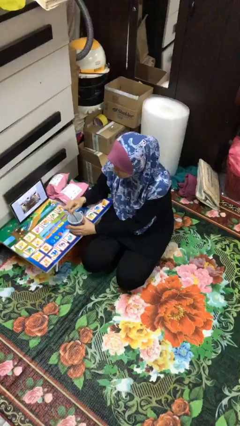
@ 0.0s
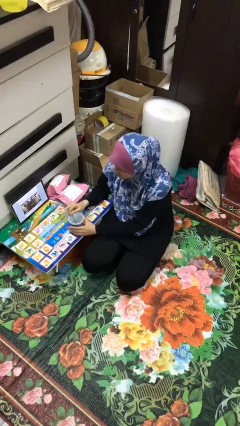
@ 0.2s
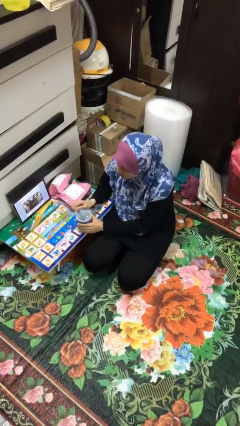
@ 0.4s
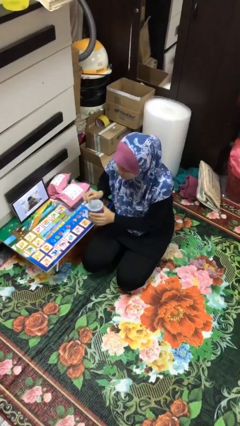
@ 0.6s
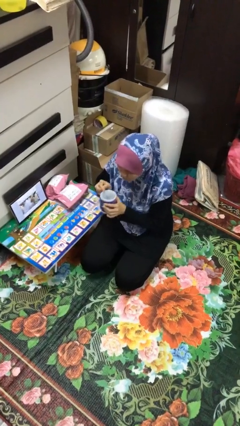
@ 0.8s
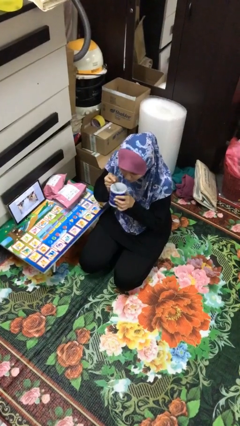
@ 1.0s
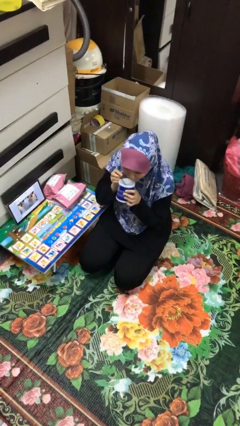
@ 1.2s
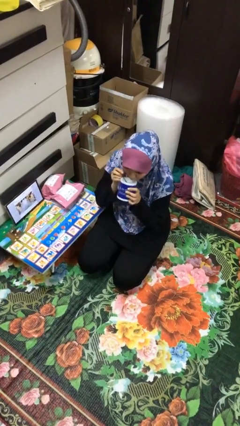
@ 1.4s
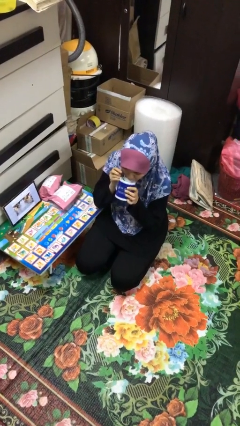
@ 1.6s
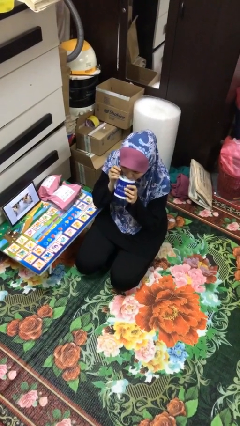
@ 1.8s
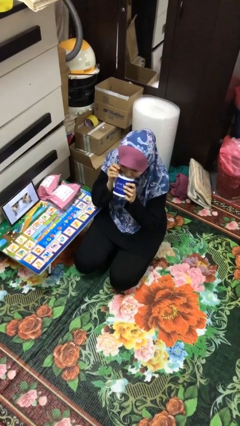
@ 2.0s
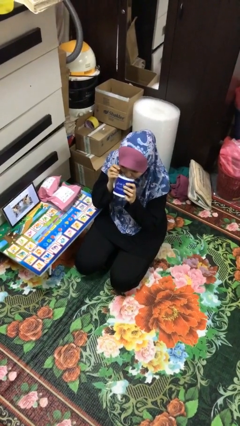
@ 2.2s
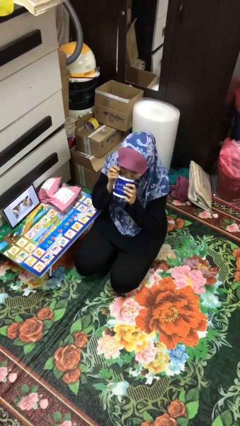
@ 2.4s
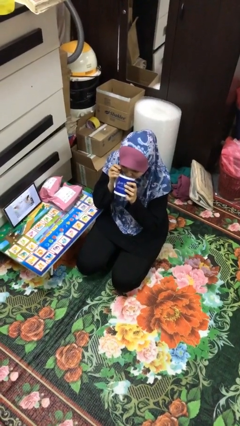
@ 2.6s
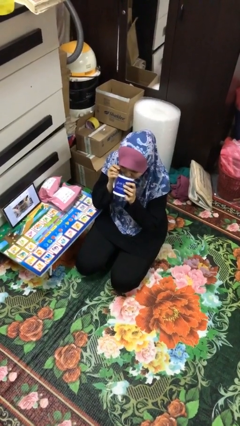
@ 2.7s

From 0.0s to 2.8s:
person drinks from mug

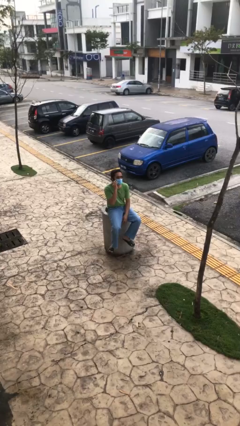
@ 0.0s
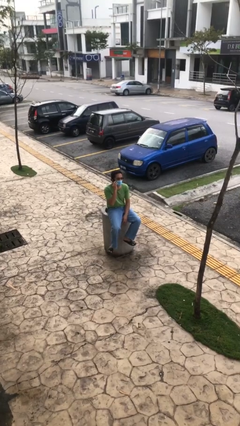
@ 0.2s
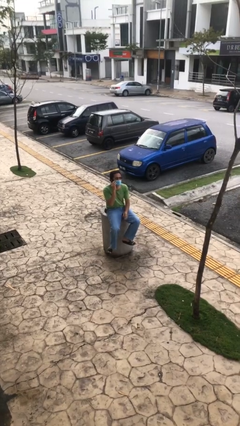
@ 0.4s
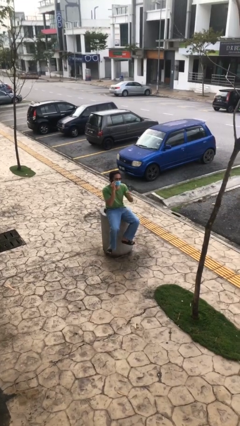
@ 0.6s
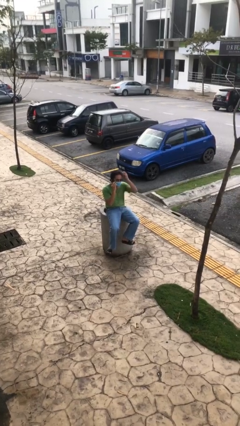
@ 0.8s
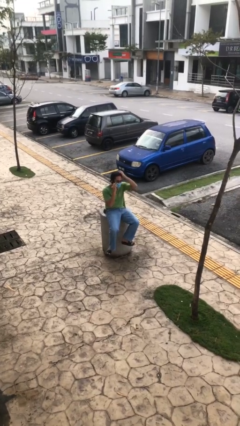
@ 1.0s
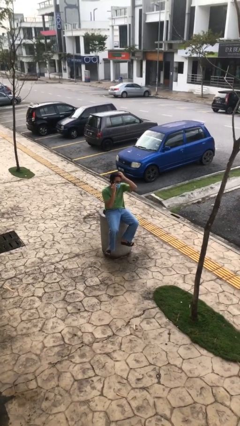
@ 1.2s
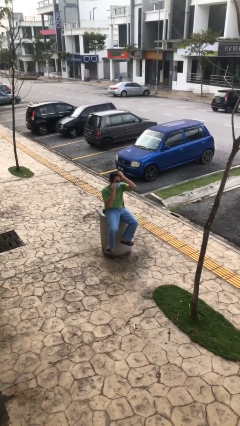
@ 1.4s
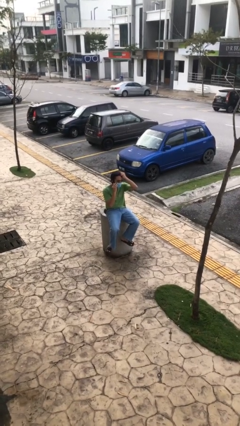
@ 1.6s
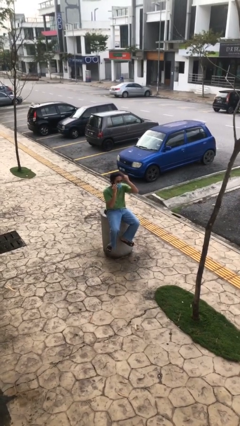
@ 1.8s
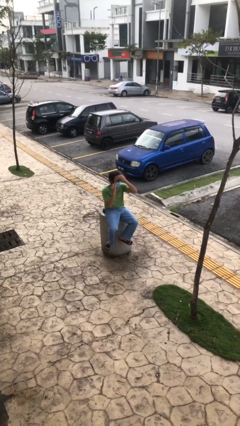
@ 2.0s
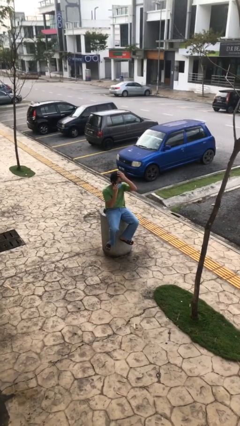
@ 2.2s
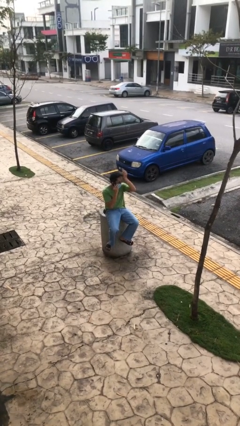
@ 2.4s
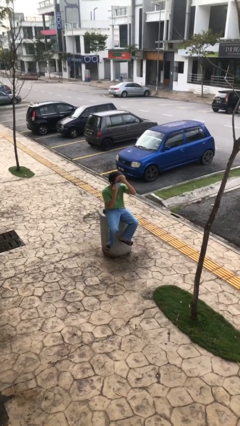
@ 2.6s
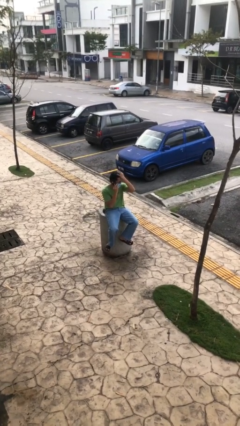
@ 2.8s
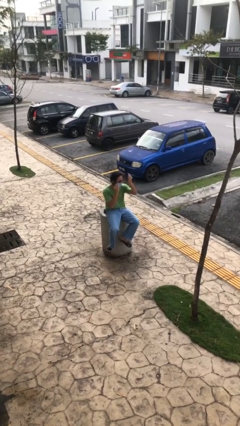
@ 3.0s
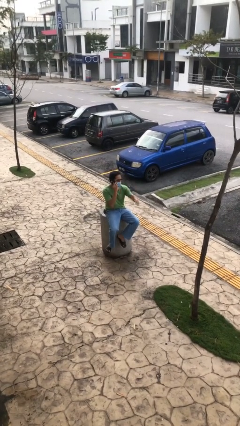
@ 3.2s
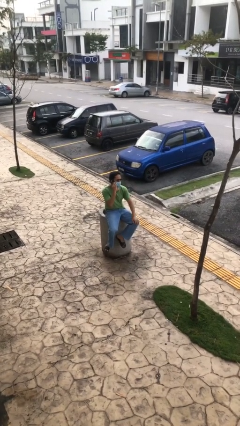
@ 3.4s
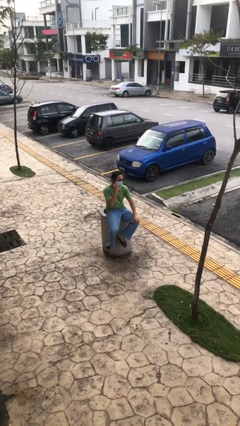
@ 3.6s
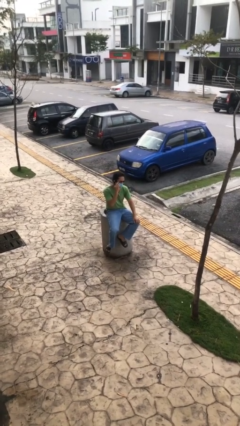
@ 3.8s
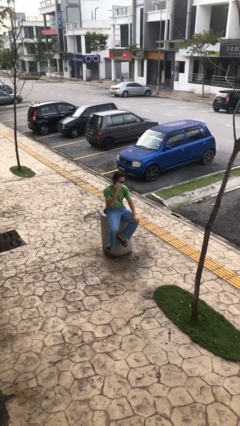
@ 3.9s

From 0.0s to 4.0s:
person talks on phone

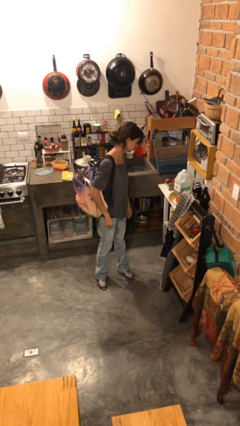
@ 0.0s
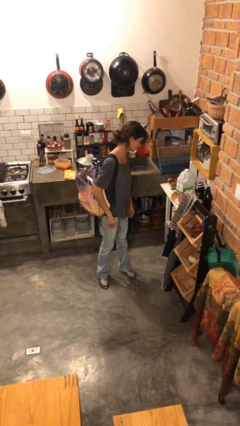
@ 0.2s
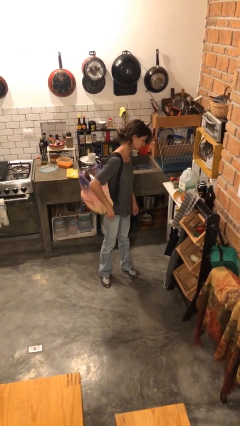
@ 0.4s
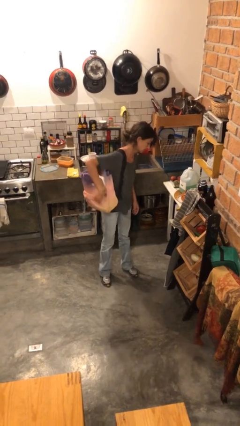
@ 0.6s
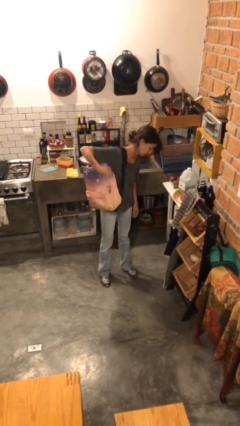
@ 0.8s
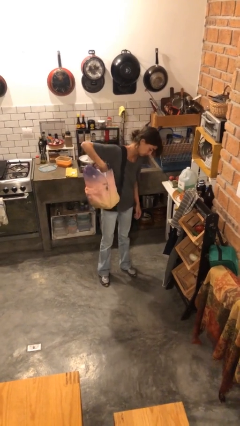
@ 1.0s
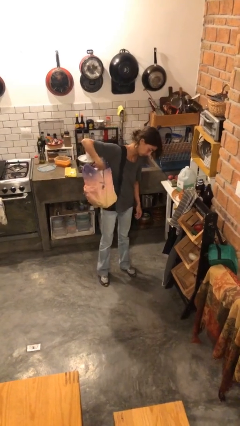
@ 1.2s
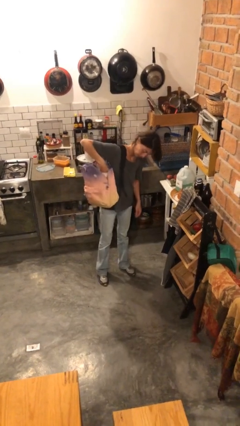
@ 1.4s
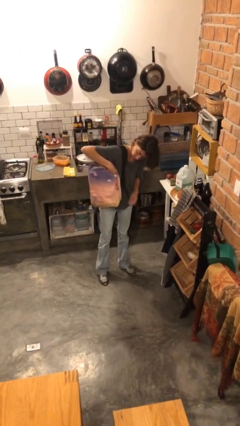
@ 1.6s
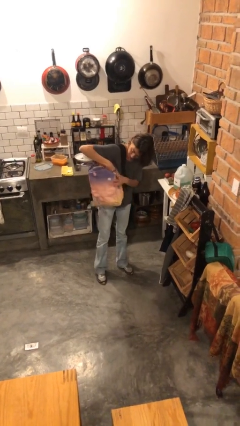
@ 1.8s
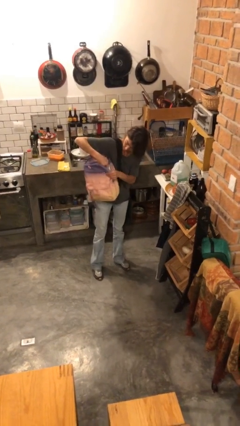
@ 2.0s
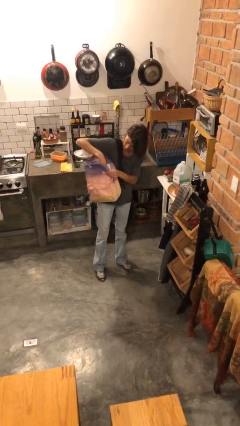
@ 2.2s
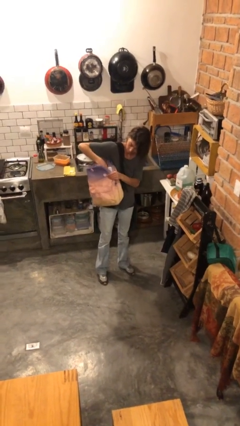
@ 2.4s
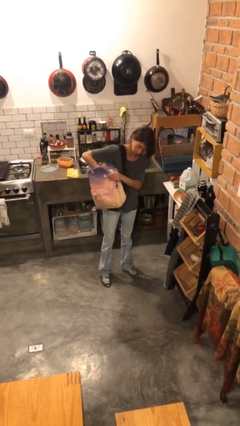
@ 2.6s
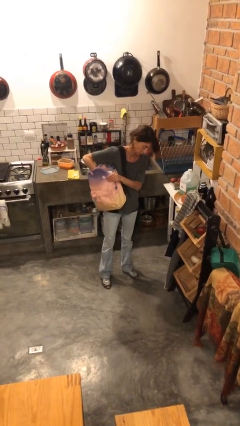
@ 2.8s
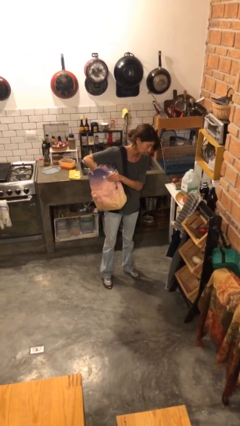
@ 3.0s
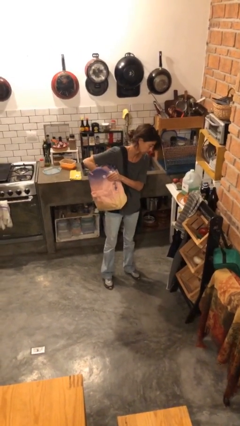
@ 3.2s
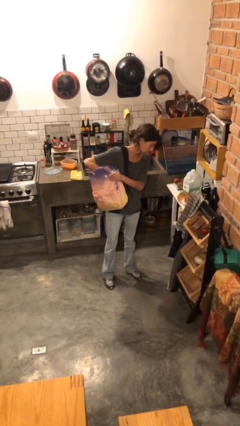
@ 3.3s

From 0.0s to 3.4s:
person searches in backpack

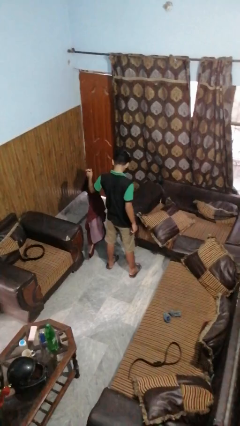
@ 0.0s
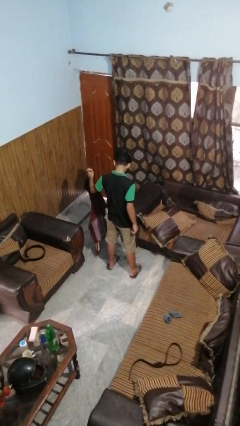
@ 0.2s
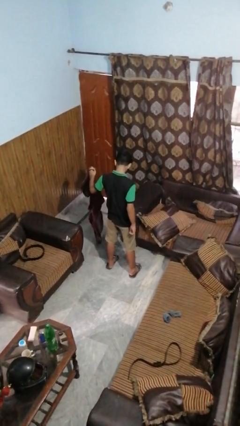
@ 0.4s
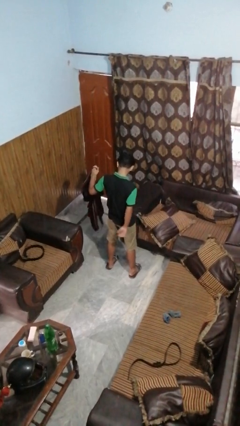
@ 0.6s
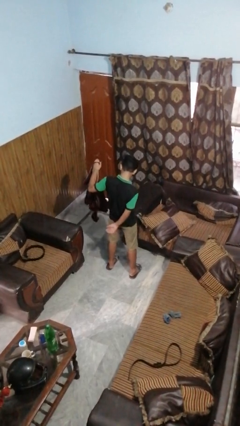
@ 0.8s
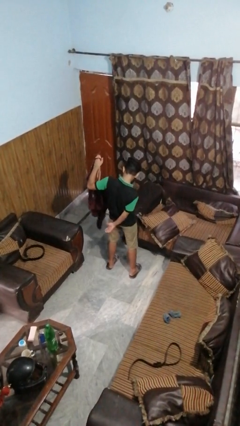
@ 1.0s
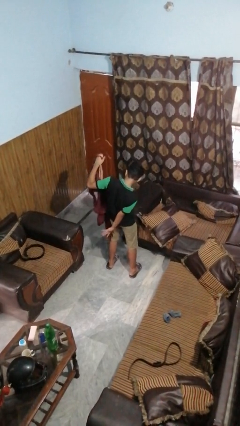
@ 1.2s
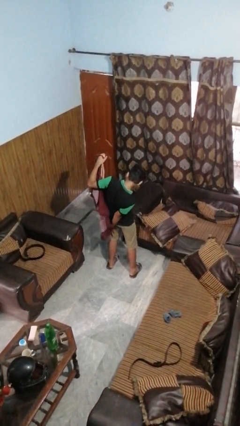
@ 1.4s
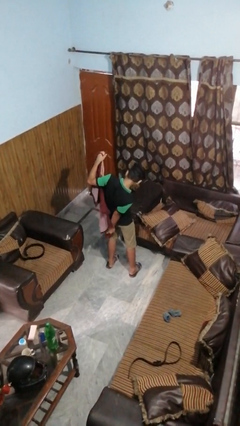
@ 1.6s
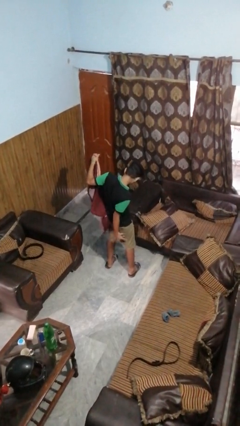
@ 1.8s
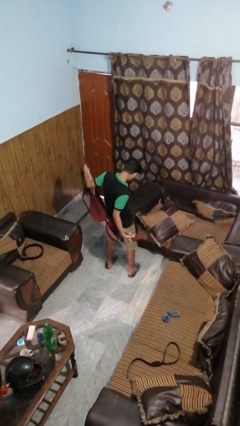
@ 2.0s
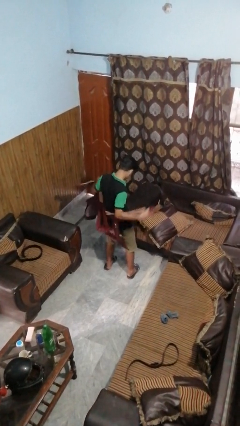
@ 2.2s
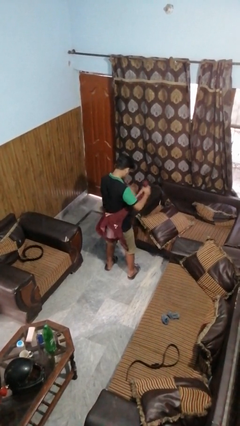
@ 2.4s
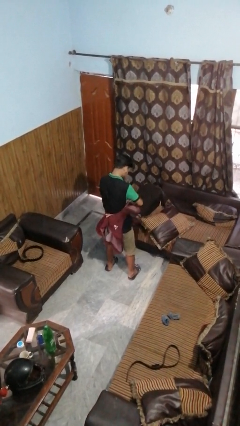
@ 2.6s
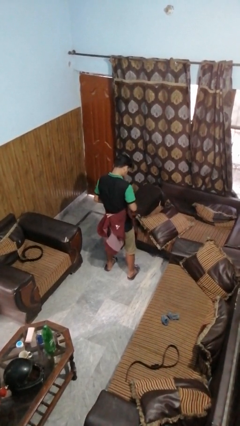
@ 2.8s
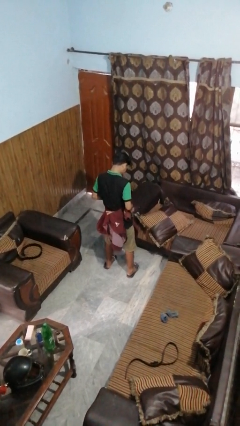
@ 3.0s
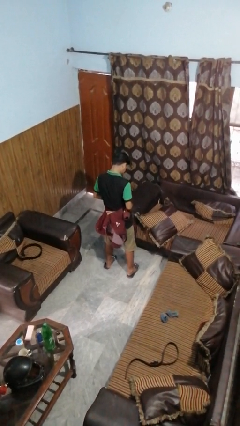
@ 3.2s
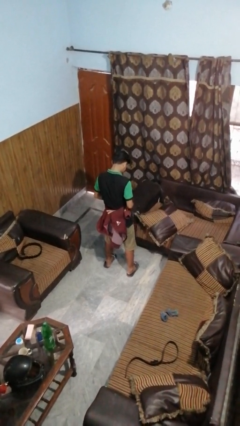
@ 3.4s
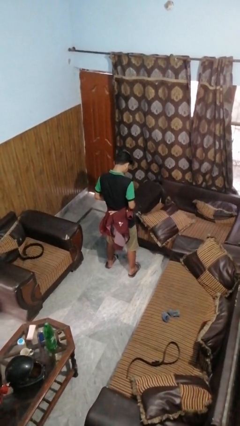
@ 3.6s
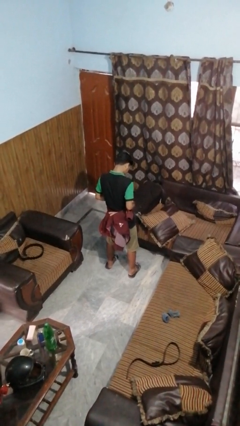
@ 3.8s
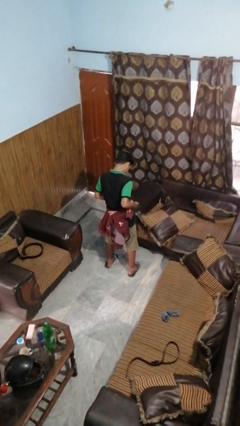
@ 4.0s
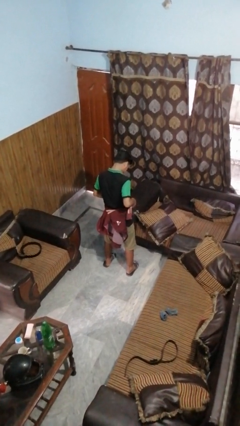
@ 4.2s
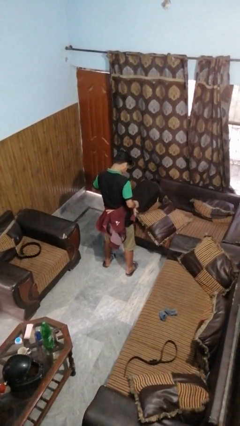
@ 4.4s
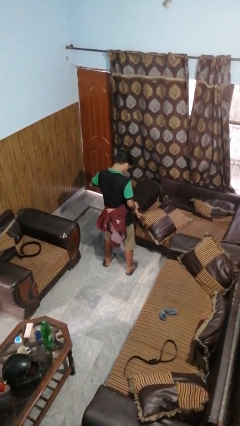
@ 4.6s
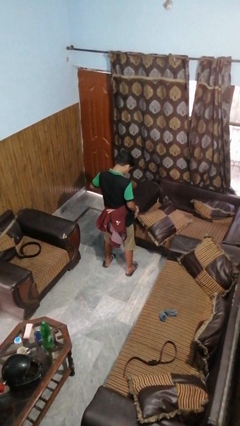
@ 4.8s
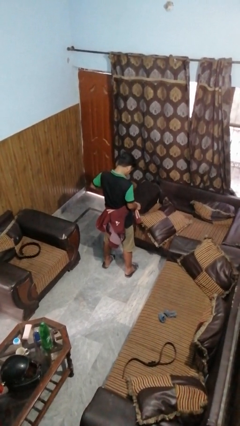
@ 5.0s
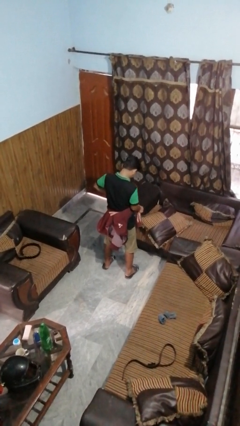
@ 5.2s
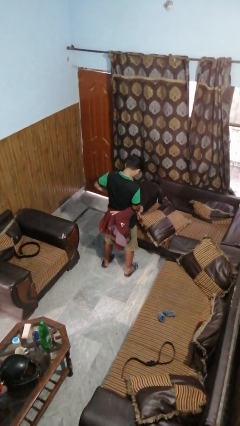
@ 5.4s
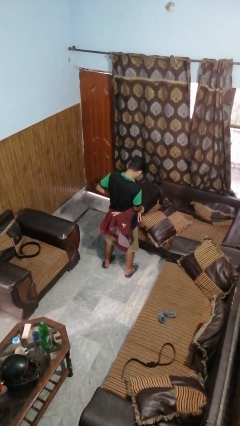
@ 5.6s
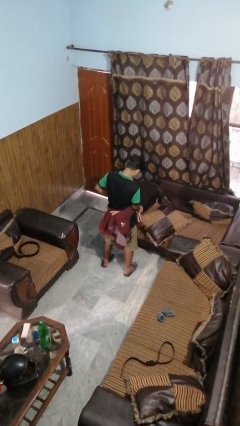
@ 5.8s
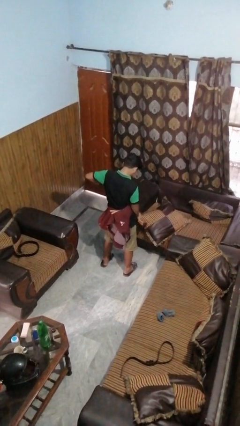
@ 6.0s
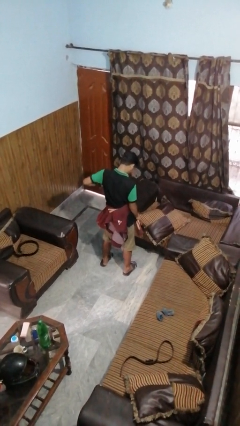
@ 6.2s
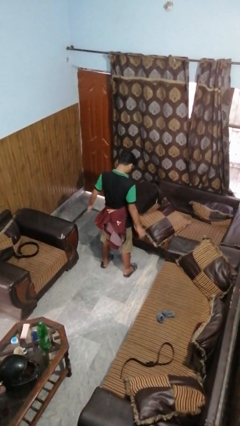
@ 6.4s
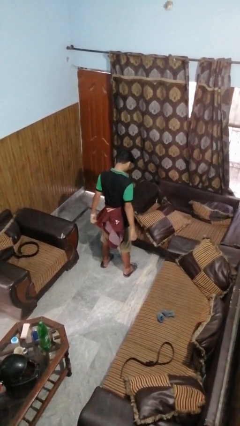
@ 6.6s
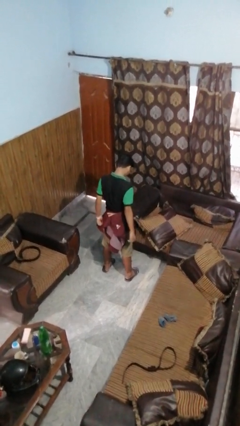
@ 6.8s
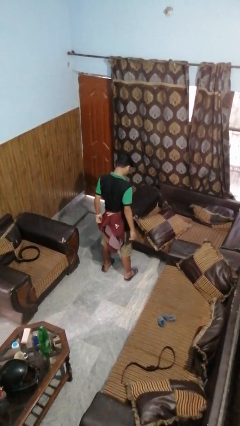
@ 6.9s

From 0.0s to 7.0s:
person ties jacket around waist

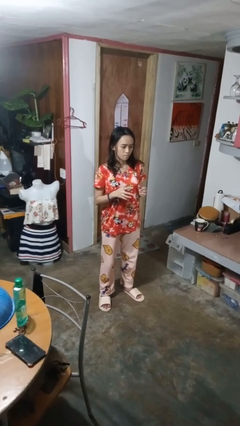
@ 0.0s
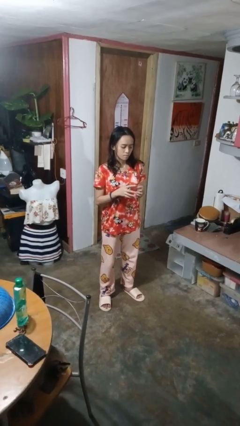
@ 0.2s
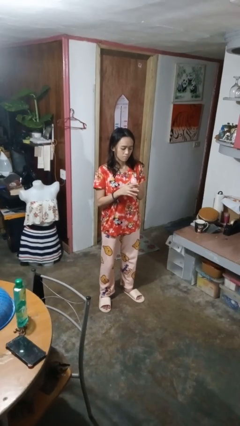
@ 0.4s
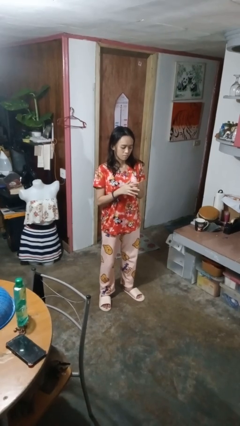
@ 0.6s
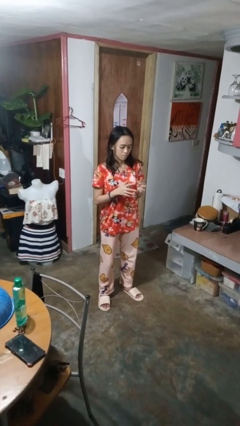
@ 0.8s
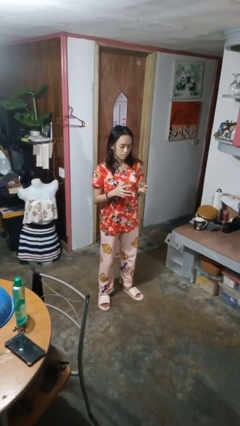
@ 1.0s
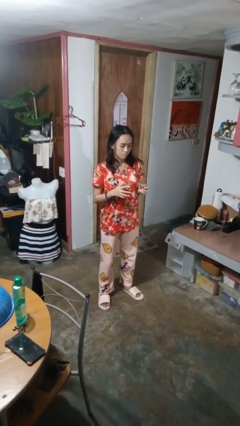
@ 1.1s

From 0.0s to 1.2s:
person takes off ring
